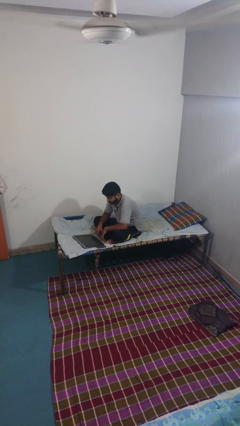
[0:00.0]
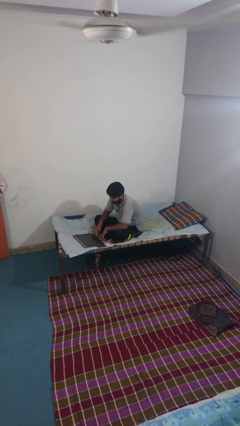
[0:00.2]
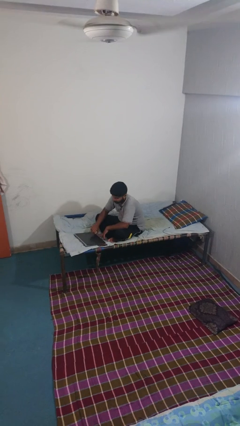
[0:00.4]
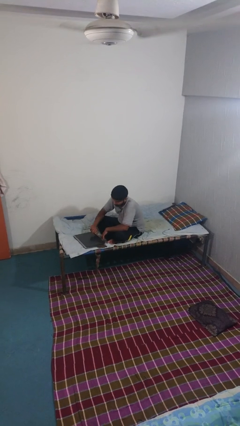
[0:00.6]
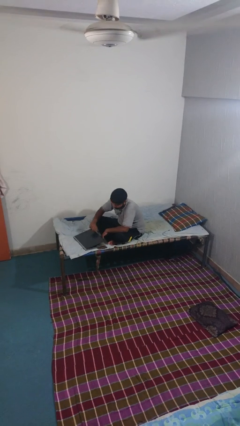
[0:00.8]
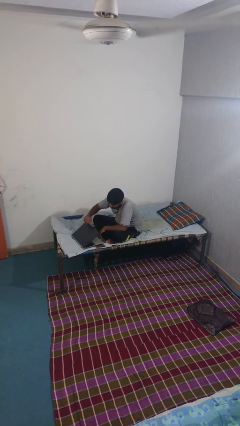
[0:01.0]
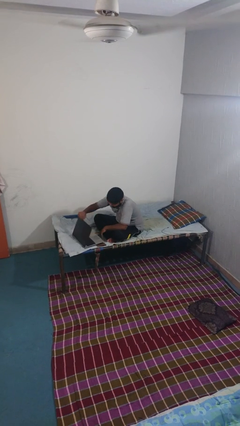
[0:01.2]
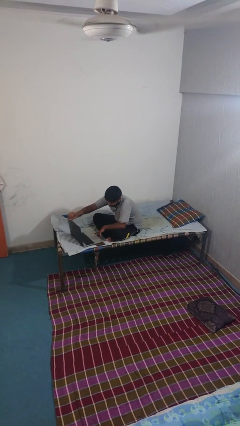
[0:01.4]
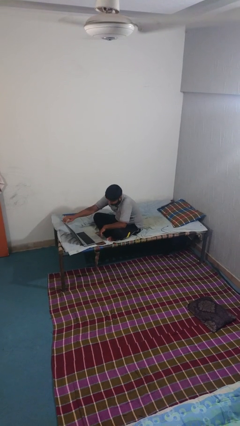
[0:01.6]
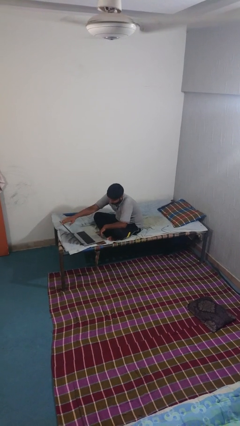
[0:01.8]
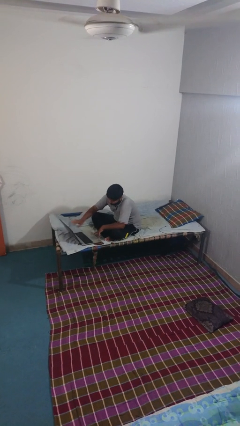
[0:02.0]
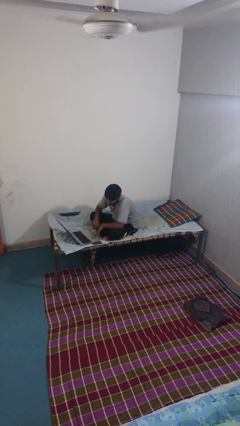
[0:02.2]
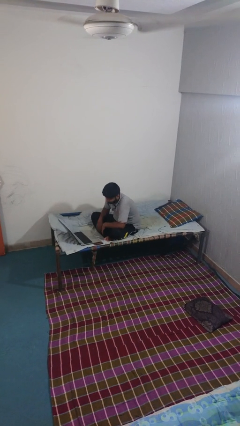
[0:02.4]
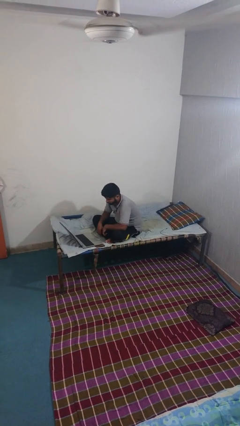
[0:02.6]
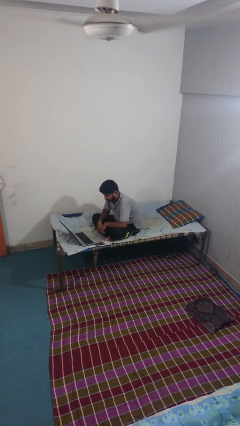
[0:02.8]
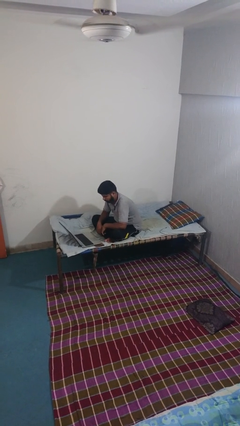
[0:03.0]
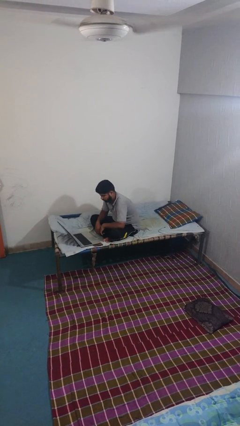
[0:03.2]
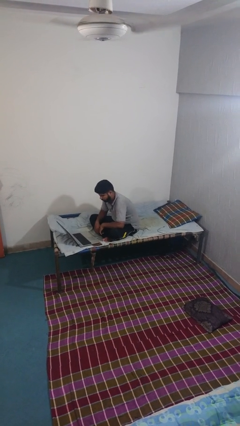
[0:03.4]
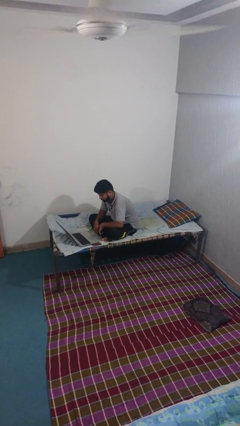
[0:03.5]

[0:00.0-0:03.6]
person opens laptop

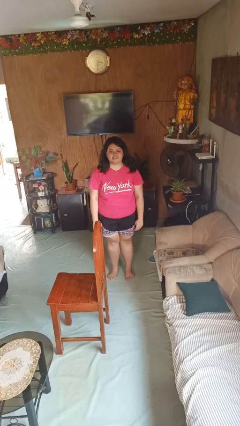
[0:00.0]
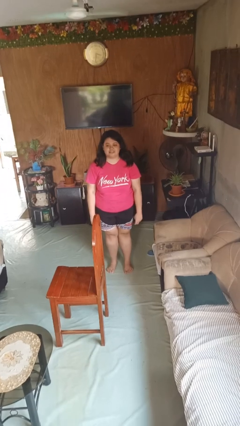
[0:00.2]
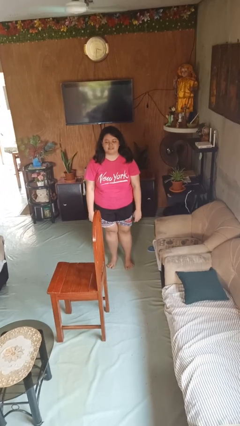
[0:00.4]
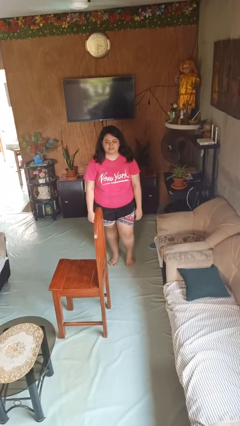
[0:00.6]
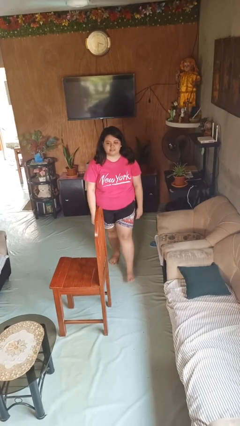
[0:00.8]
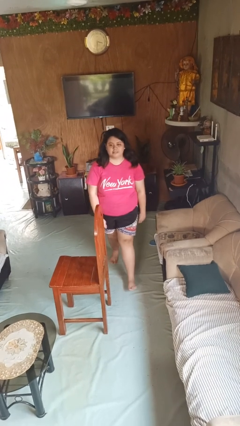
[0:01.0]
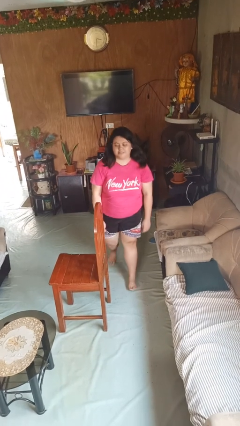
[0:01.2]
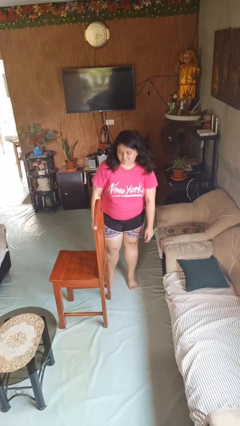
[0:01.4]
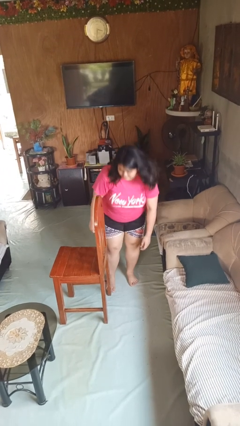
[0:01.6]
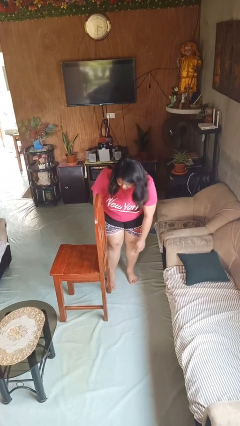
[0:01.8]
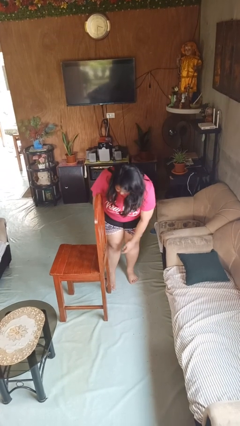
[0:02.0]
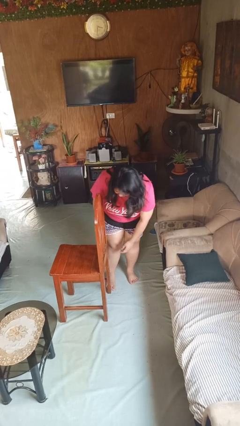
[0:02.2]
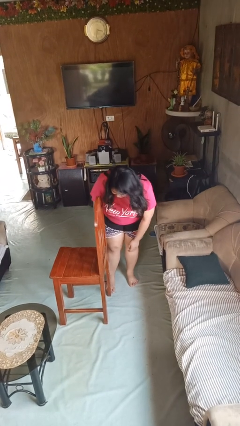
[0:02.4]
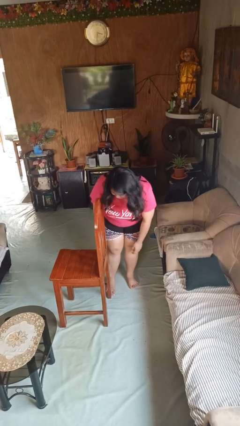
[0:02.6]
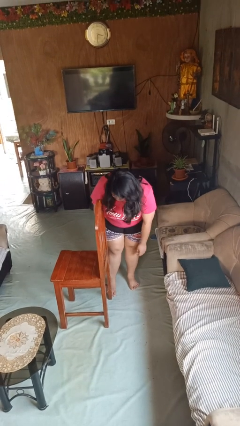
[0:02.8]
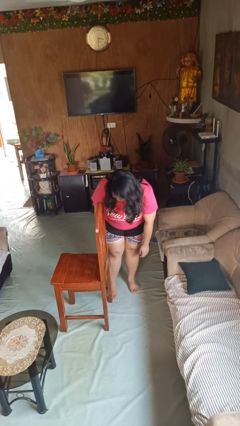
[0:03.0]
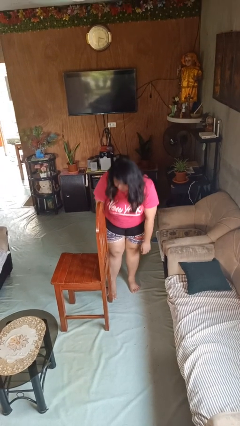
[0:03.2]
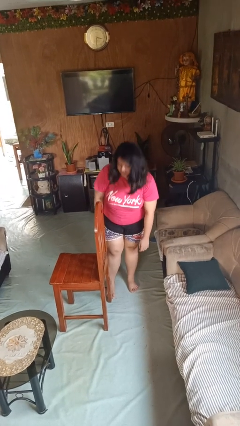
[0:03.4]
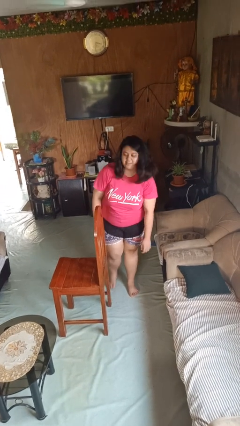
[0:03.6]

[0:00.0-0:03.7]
person stubs toe

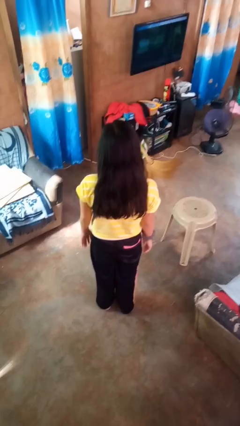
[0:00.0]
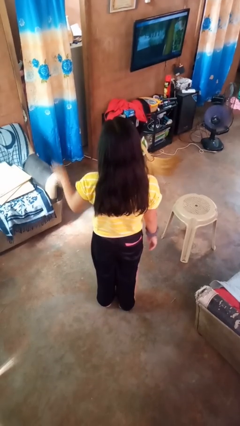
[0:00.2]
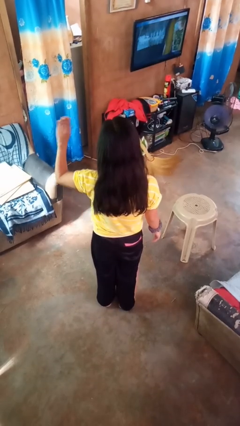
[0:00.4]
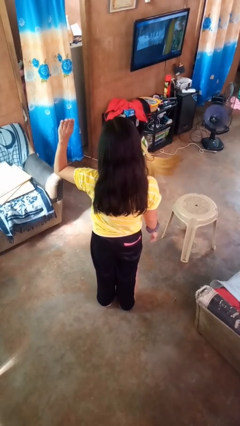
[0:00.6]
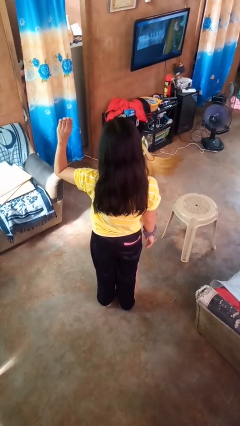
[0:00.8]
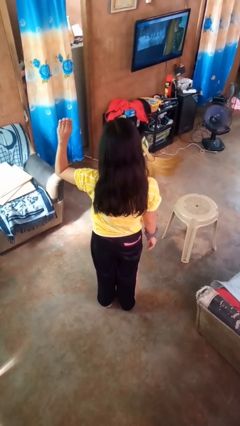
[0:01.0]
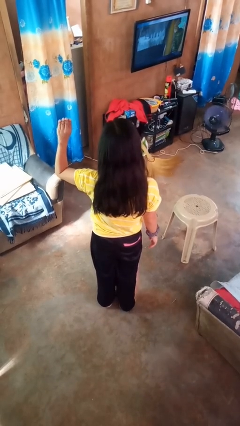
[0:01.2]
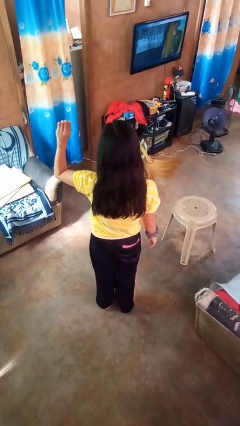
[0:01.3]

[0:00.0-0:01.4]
person gestures number four

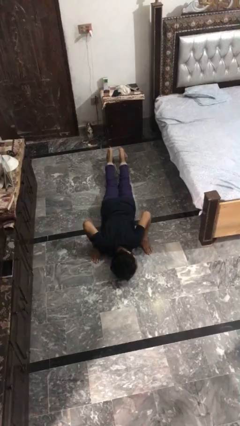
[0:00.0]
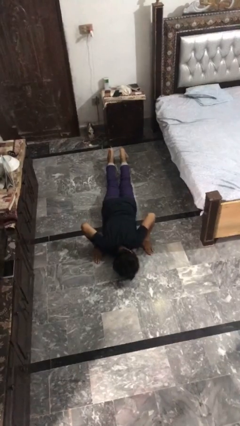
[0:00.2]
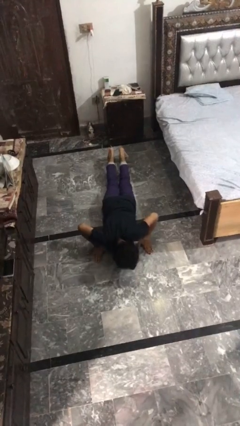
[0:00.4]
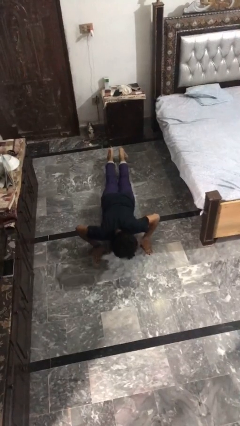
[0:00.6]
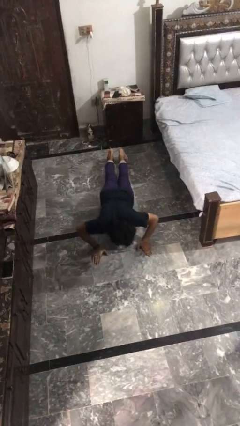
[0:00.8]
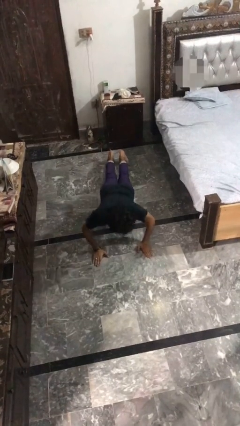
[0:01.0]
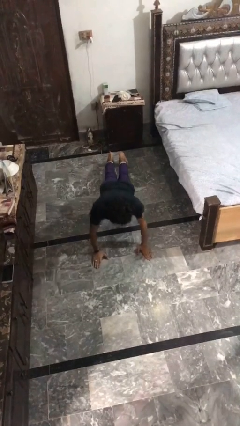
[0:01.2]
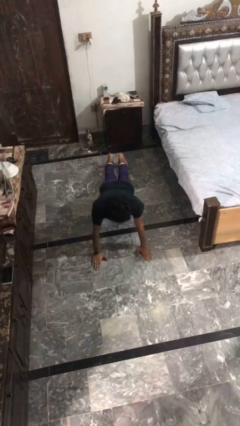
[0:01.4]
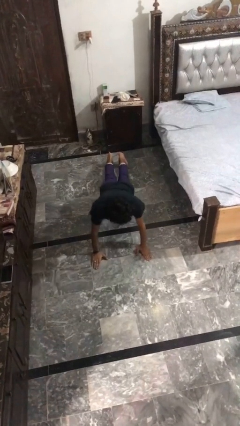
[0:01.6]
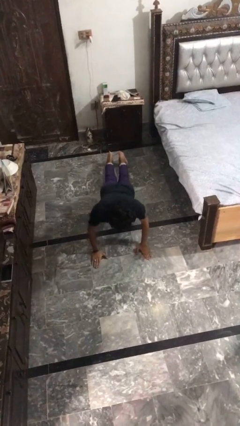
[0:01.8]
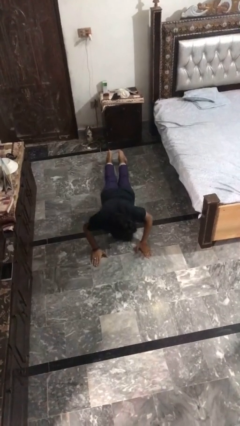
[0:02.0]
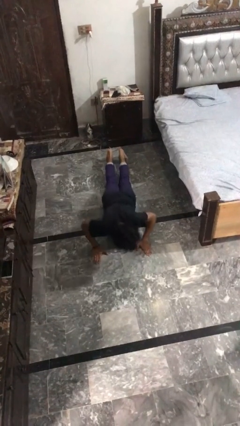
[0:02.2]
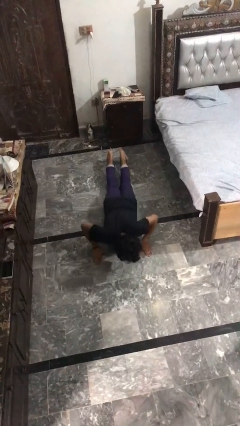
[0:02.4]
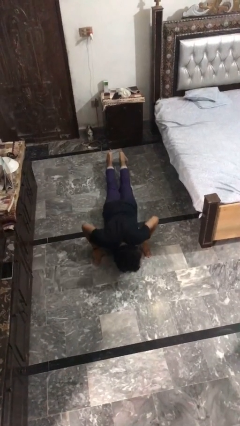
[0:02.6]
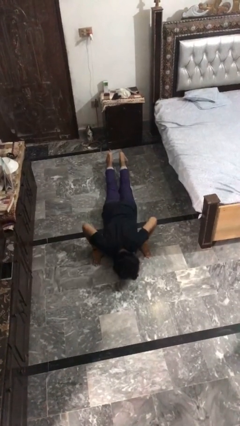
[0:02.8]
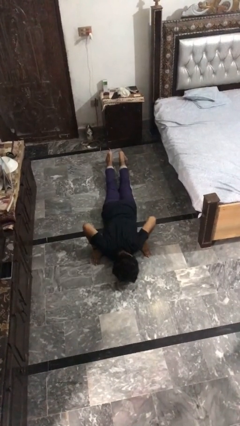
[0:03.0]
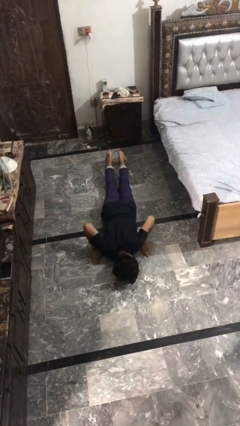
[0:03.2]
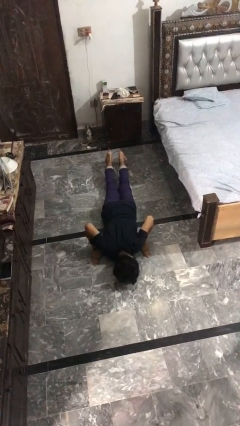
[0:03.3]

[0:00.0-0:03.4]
person exercises with pushup

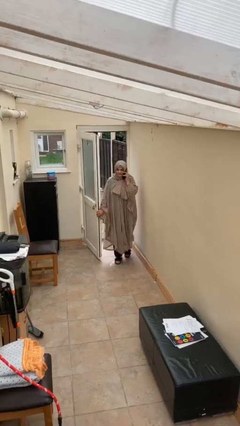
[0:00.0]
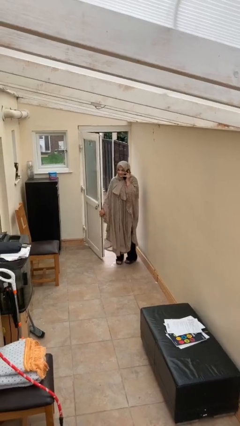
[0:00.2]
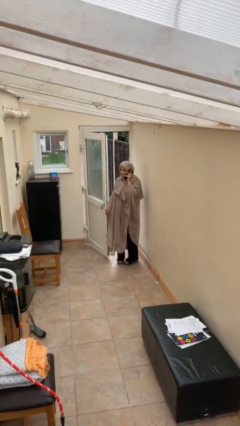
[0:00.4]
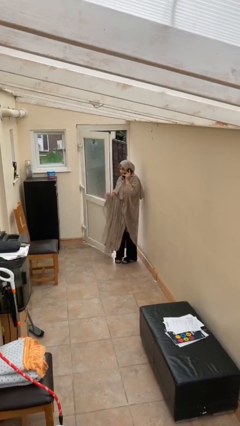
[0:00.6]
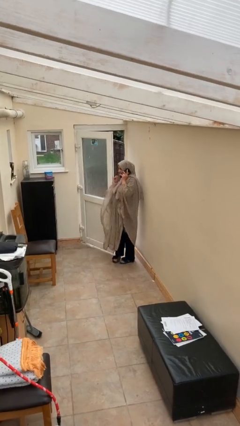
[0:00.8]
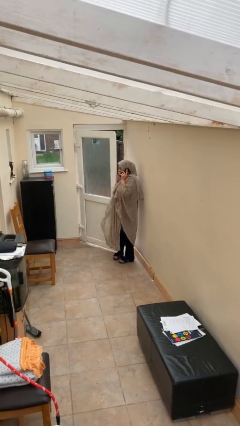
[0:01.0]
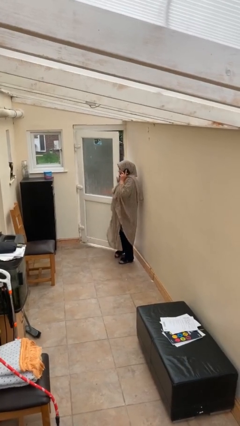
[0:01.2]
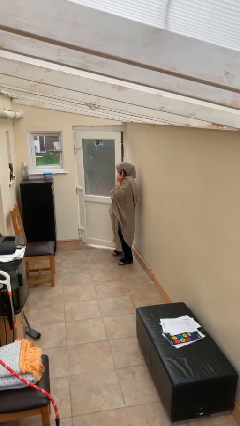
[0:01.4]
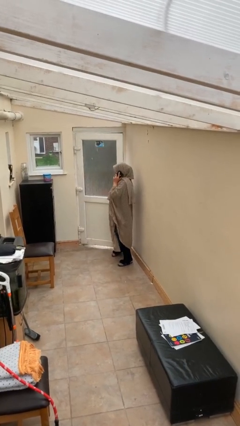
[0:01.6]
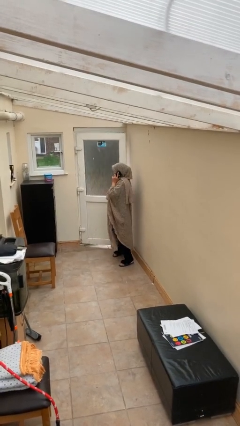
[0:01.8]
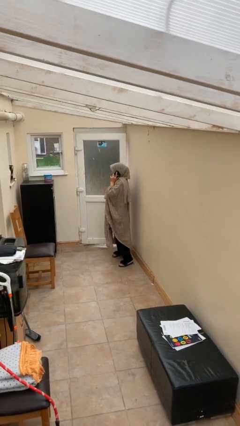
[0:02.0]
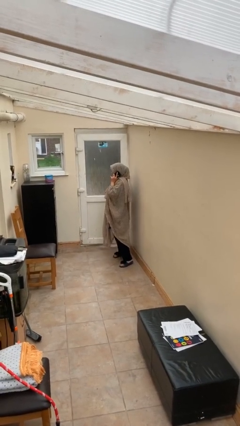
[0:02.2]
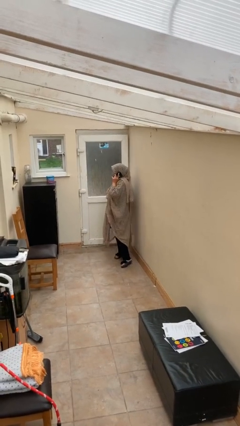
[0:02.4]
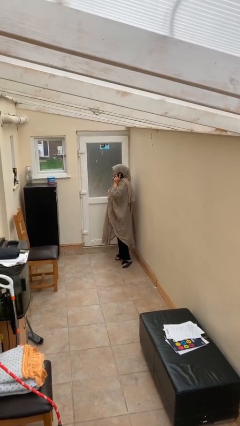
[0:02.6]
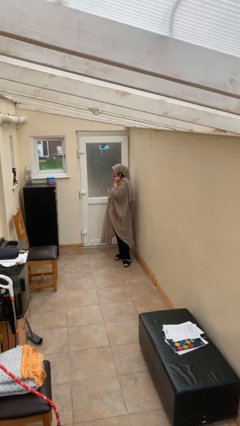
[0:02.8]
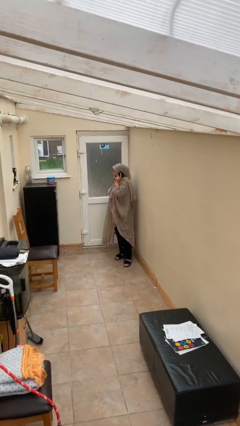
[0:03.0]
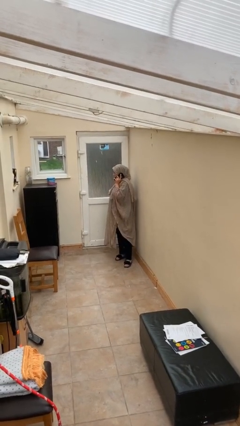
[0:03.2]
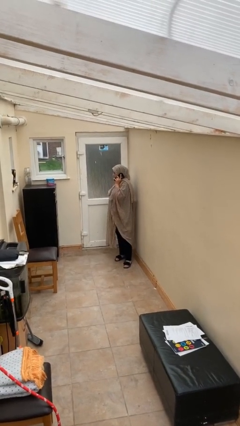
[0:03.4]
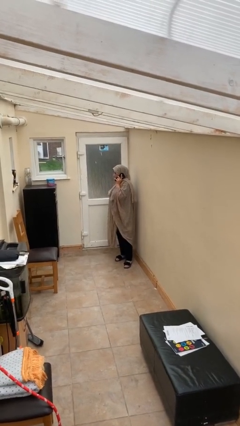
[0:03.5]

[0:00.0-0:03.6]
person closes facility door

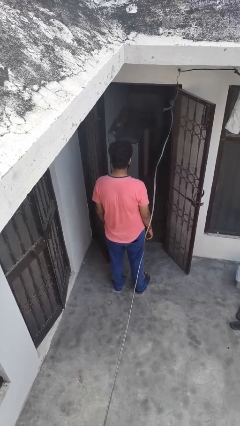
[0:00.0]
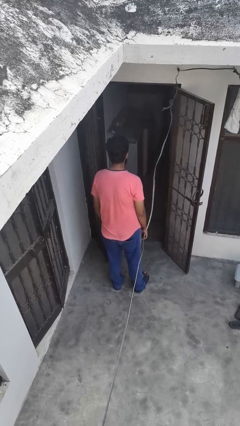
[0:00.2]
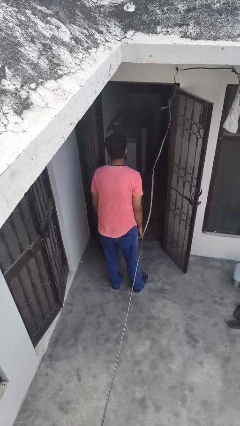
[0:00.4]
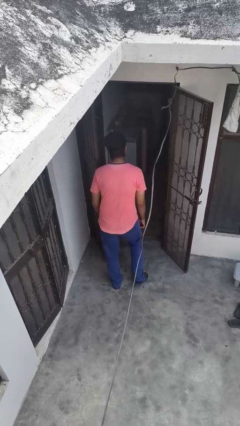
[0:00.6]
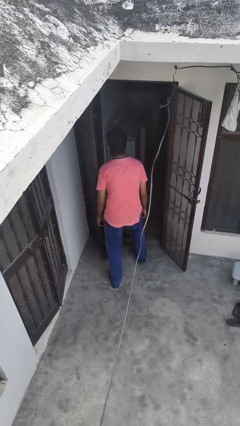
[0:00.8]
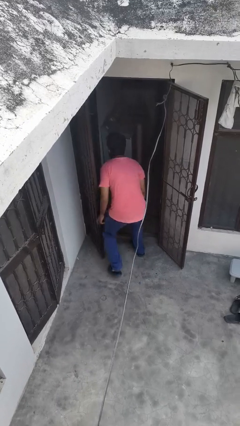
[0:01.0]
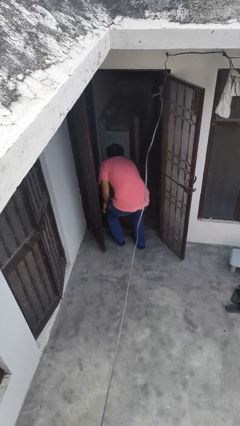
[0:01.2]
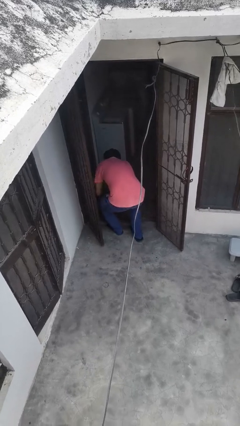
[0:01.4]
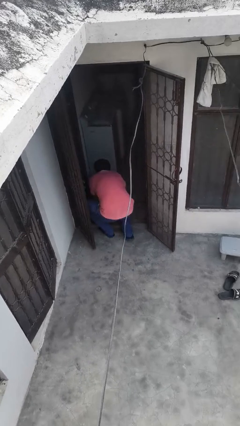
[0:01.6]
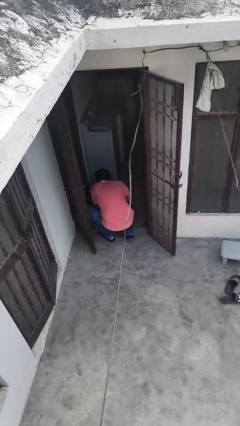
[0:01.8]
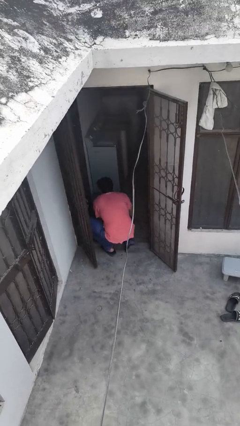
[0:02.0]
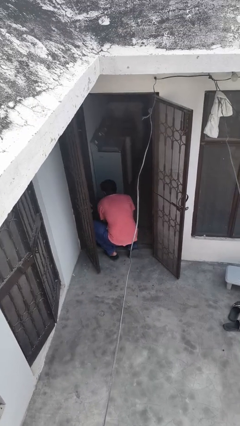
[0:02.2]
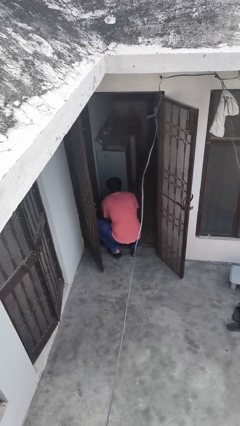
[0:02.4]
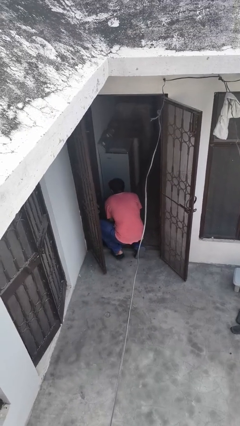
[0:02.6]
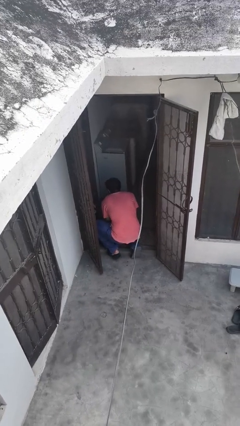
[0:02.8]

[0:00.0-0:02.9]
person bumps into wall
